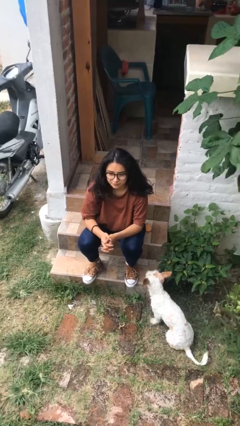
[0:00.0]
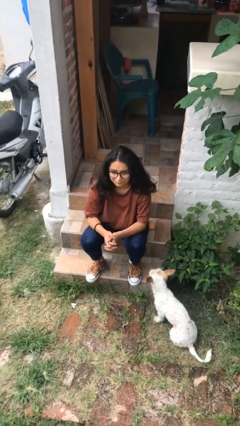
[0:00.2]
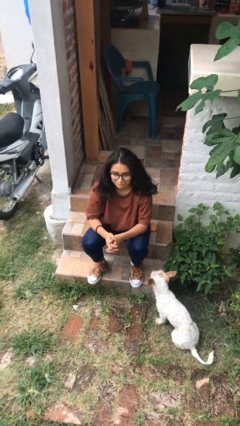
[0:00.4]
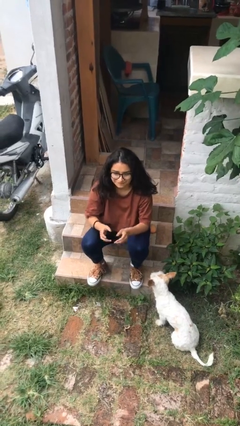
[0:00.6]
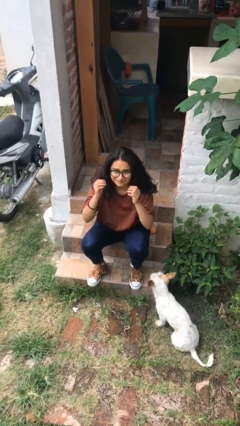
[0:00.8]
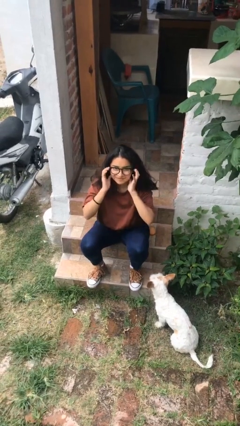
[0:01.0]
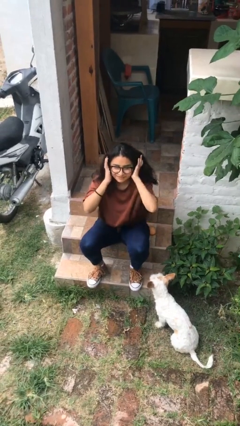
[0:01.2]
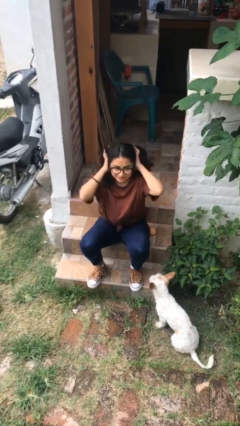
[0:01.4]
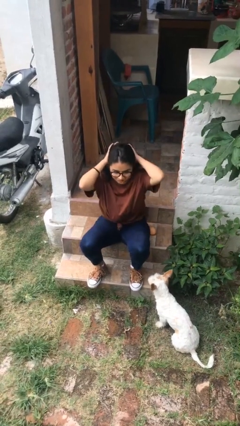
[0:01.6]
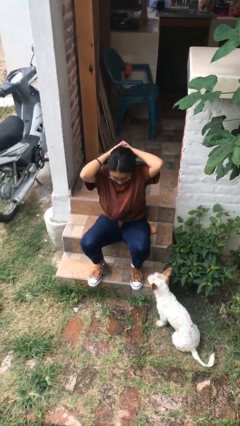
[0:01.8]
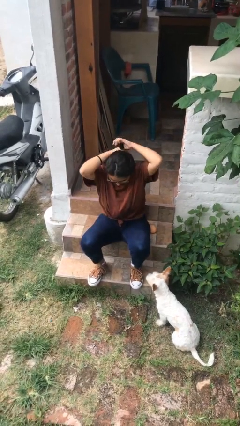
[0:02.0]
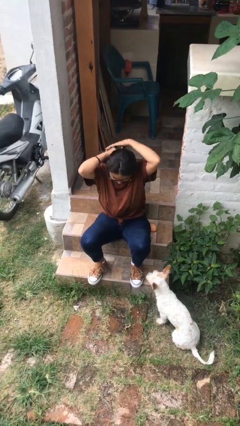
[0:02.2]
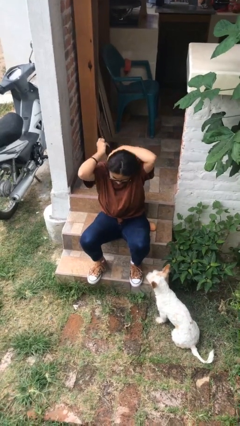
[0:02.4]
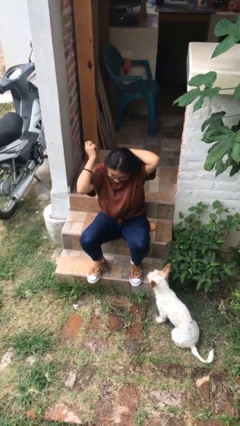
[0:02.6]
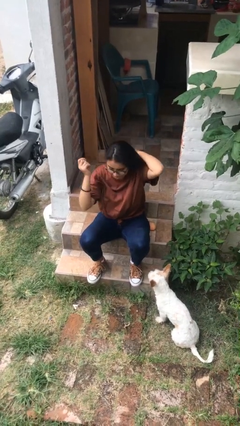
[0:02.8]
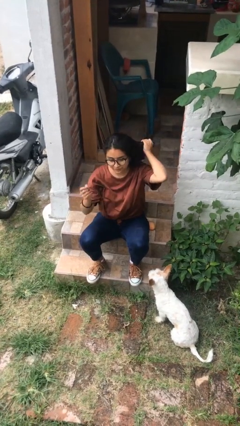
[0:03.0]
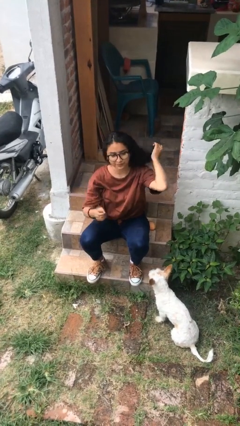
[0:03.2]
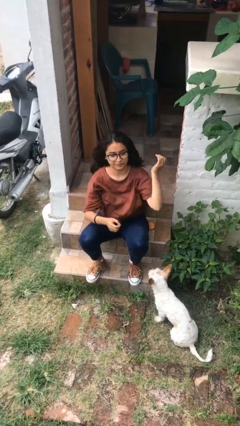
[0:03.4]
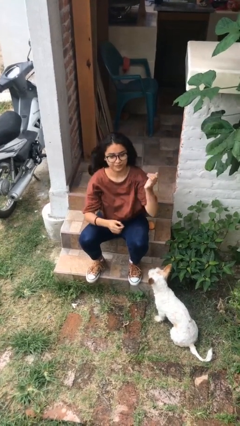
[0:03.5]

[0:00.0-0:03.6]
person strokes hair

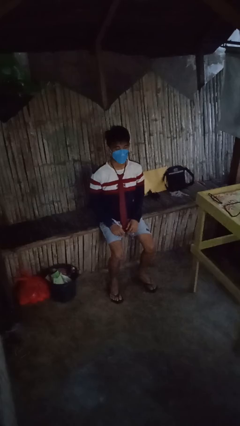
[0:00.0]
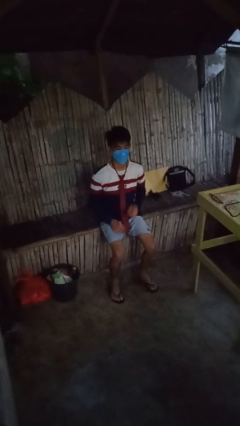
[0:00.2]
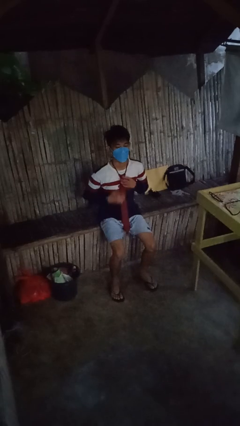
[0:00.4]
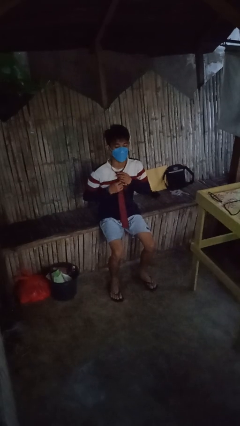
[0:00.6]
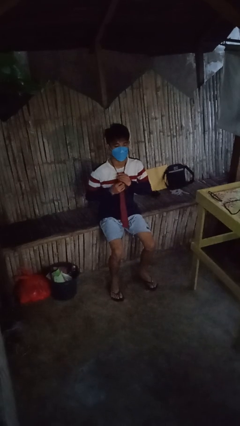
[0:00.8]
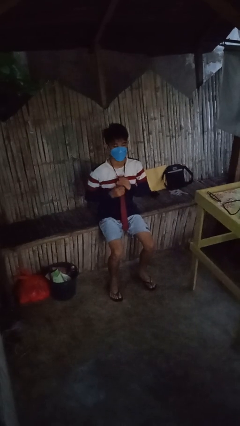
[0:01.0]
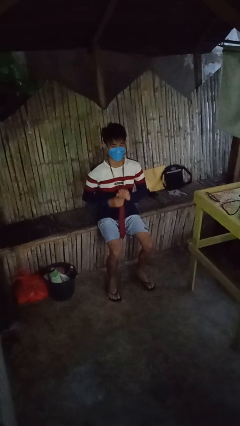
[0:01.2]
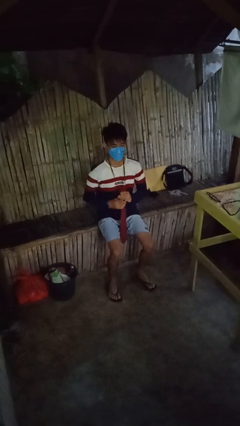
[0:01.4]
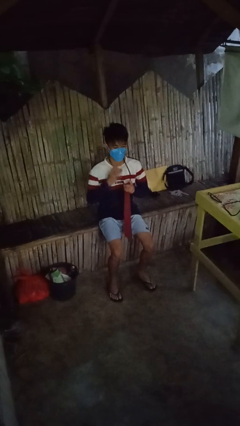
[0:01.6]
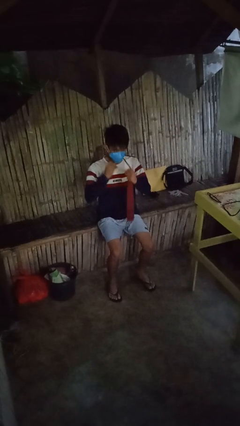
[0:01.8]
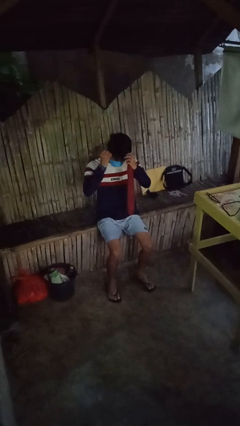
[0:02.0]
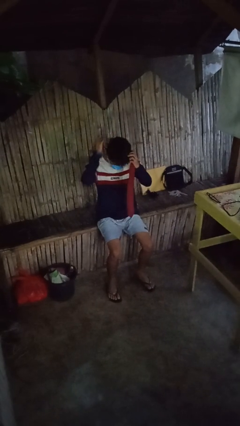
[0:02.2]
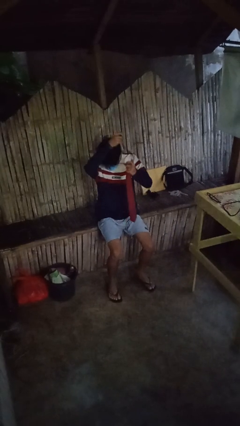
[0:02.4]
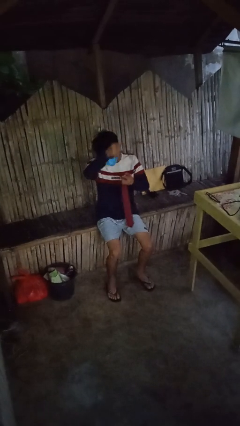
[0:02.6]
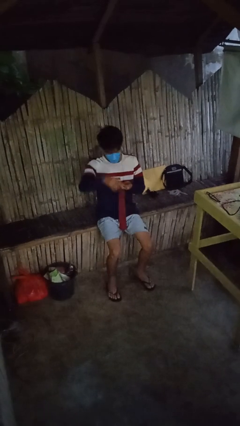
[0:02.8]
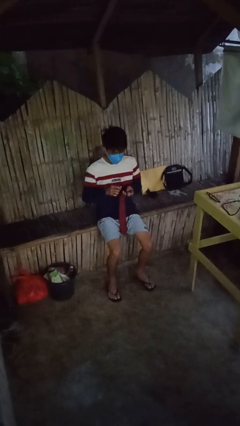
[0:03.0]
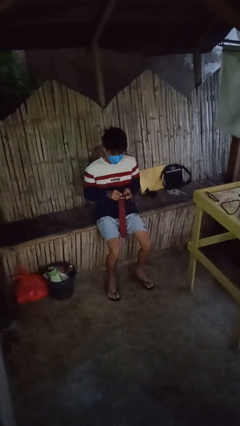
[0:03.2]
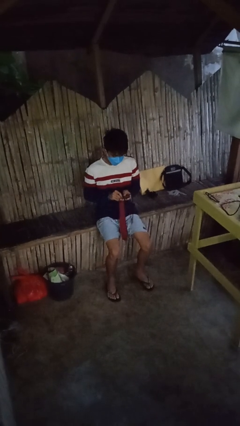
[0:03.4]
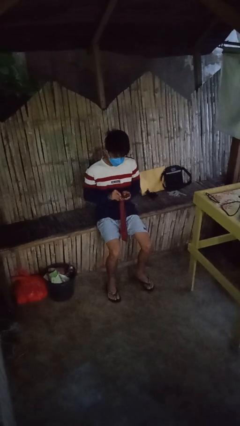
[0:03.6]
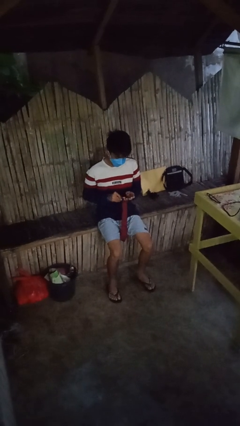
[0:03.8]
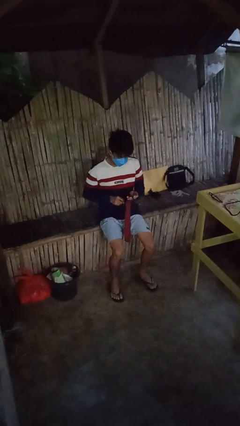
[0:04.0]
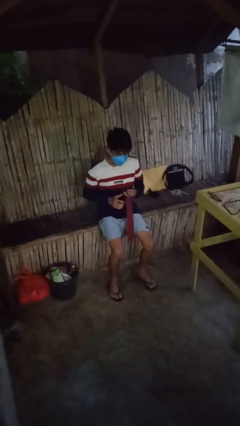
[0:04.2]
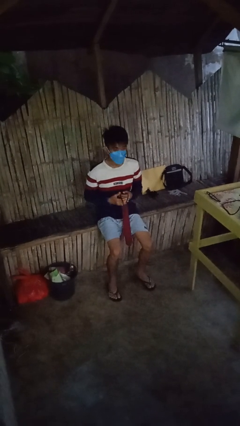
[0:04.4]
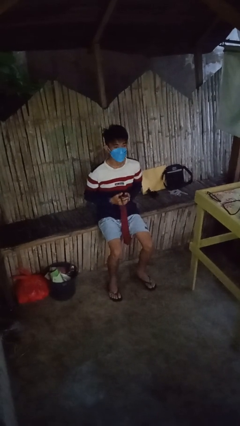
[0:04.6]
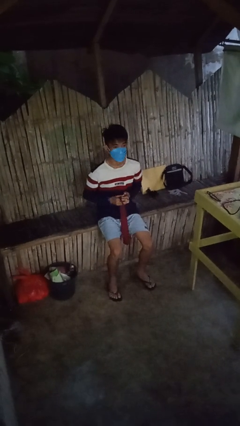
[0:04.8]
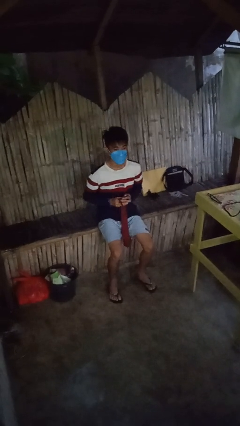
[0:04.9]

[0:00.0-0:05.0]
person takes off necktie

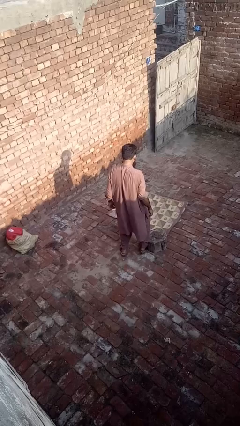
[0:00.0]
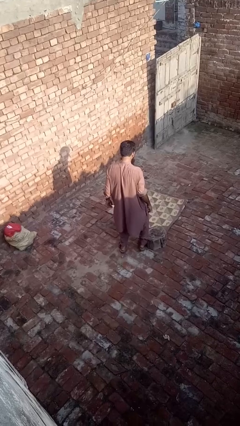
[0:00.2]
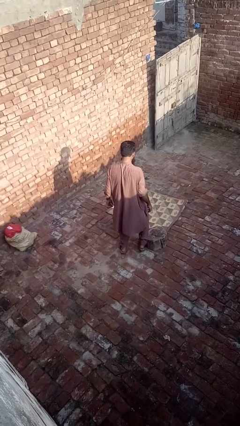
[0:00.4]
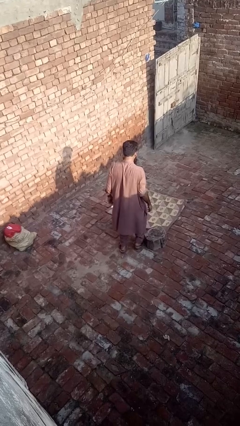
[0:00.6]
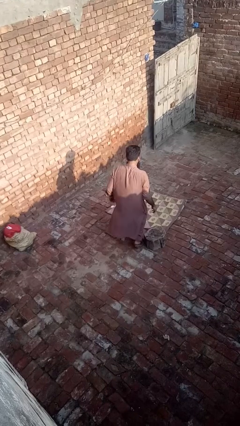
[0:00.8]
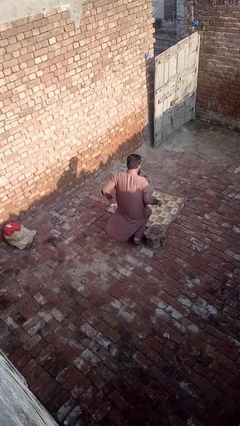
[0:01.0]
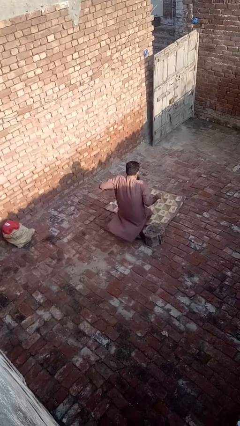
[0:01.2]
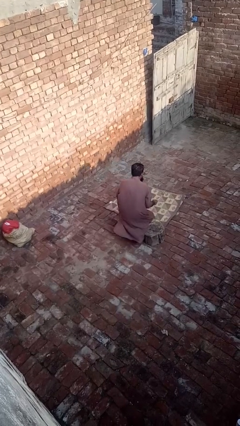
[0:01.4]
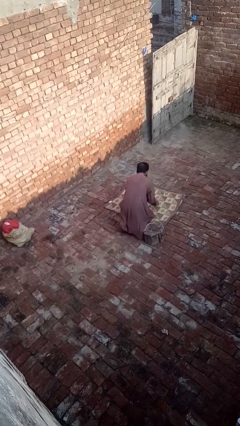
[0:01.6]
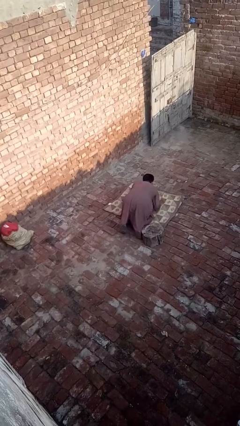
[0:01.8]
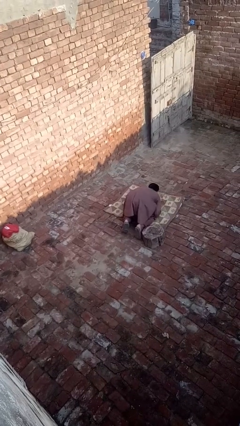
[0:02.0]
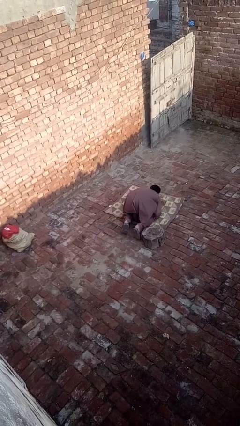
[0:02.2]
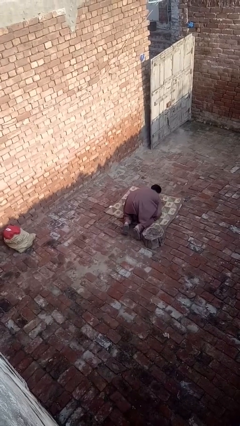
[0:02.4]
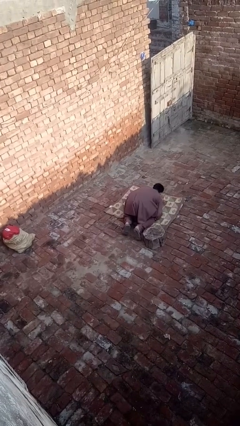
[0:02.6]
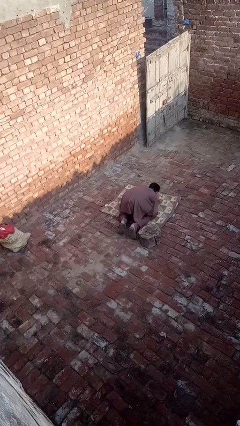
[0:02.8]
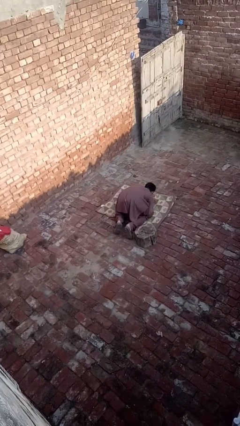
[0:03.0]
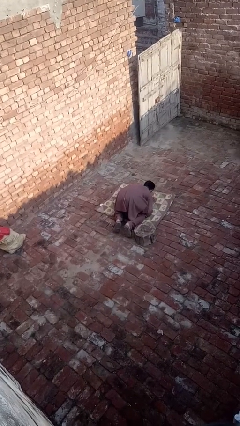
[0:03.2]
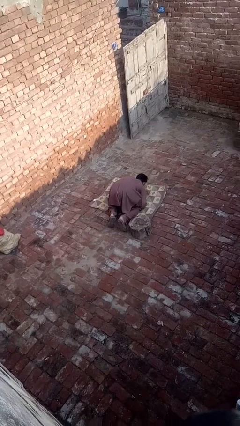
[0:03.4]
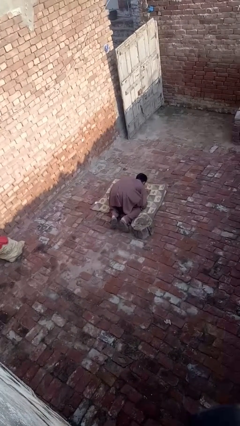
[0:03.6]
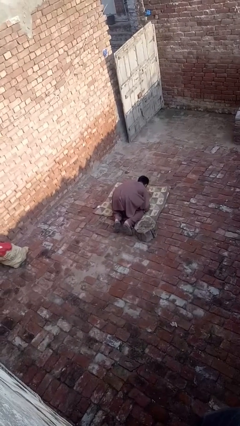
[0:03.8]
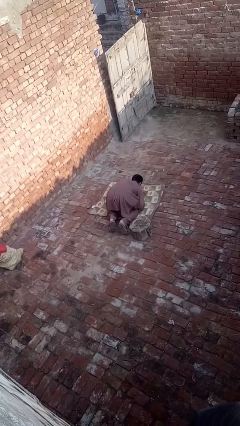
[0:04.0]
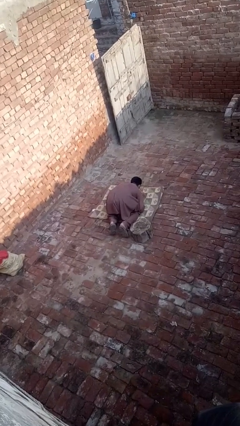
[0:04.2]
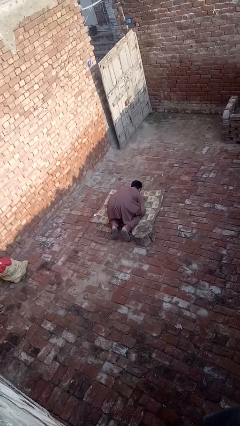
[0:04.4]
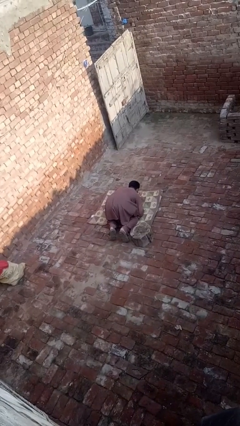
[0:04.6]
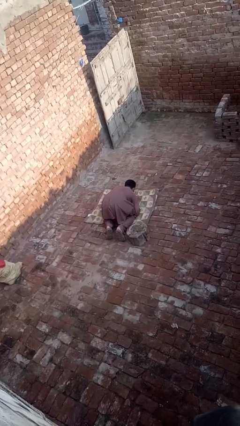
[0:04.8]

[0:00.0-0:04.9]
person lies down on floor

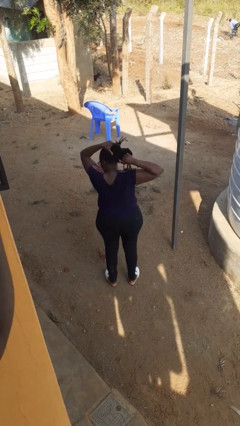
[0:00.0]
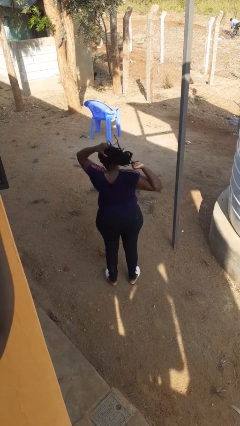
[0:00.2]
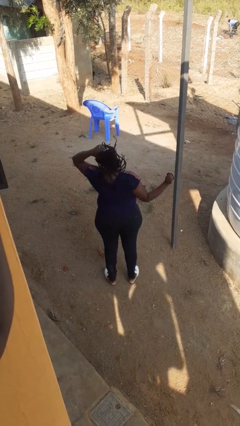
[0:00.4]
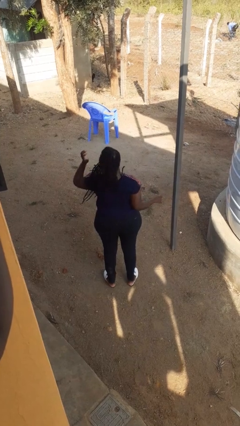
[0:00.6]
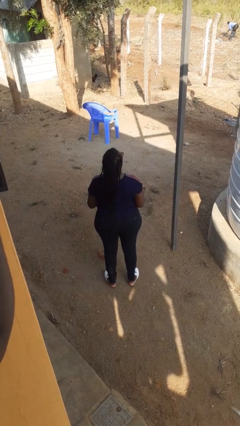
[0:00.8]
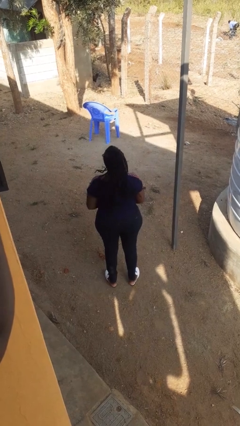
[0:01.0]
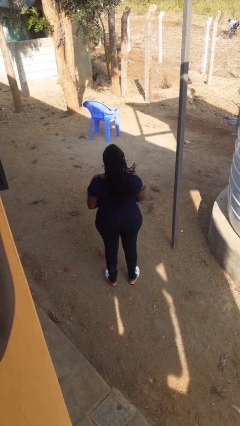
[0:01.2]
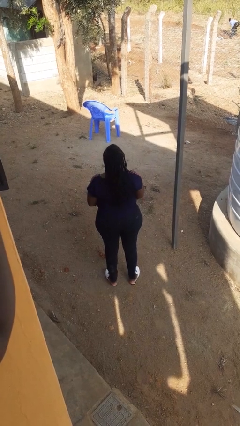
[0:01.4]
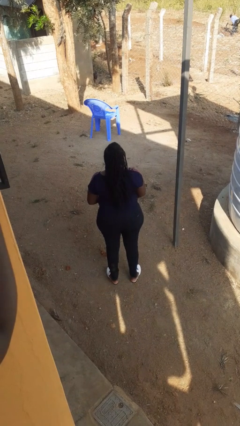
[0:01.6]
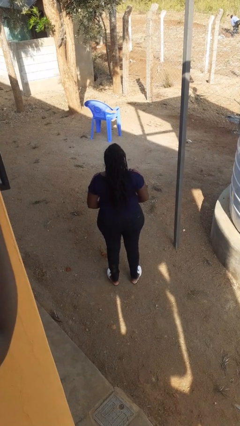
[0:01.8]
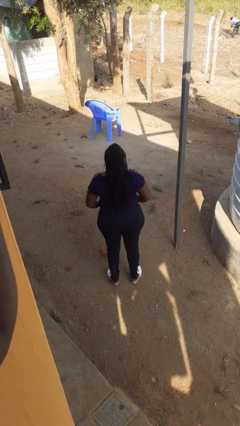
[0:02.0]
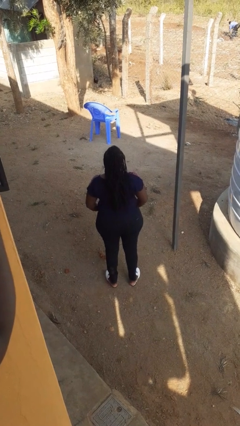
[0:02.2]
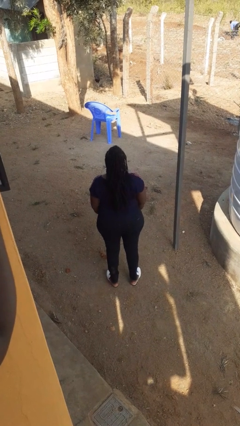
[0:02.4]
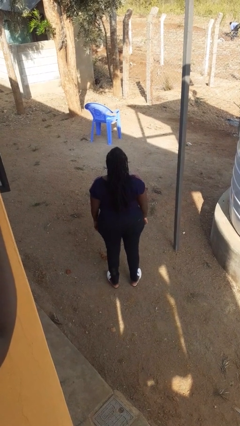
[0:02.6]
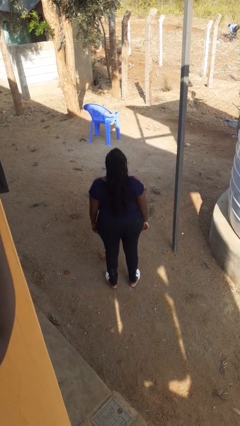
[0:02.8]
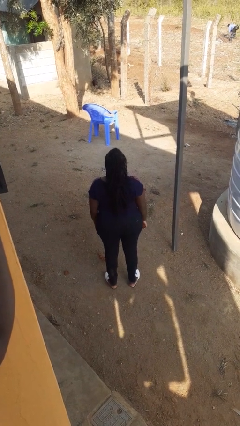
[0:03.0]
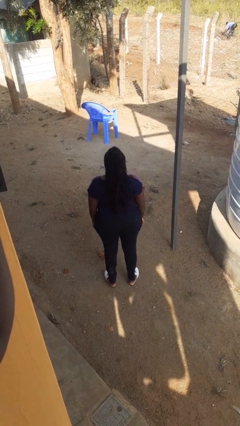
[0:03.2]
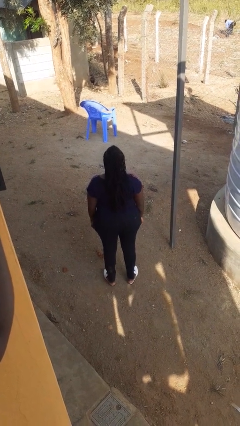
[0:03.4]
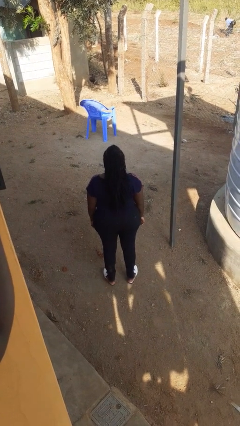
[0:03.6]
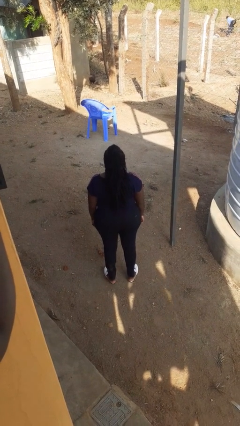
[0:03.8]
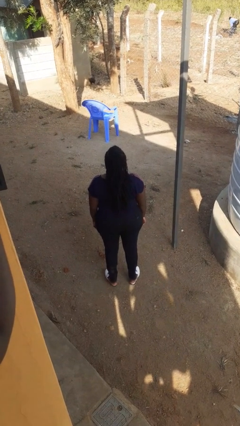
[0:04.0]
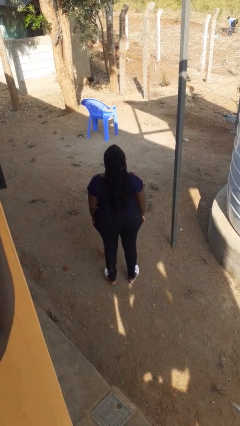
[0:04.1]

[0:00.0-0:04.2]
person takes off hairtie

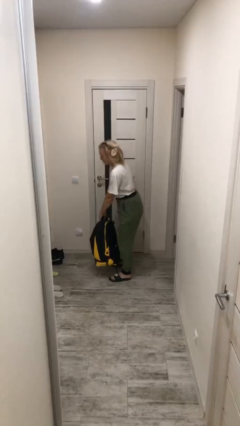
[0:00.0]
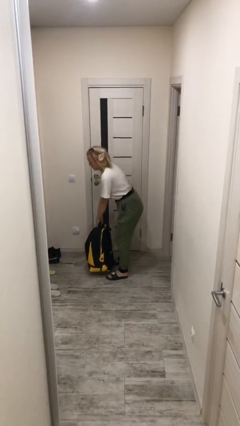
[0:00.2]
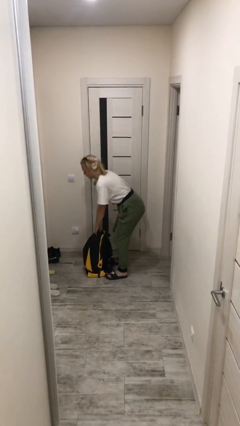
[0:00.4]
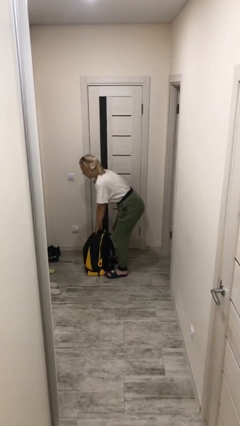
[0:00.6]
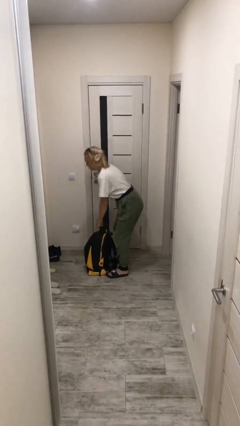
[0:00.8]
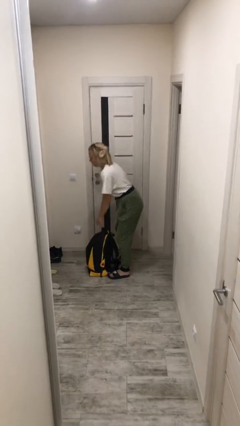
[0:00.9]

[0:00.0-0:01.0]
person puts down object on floor
